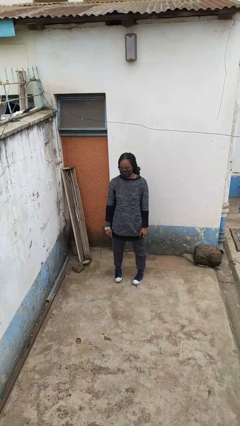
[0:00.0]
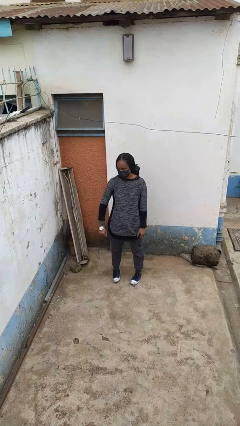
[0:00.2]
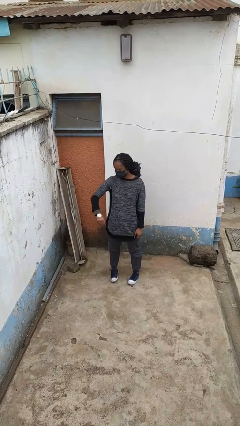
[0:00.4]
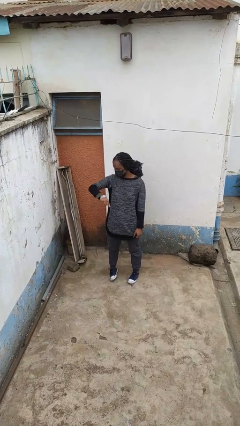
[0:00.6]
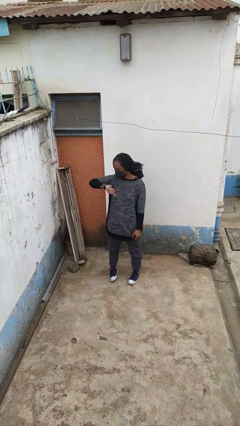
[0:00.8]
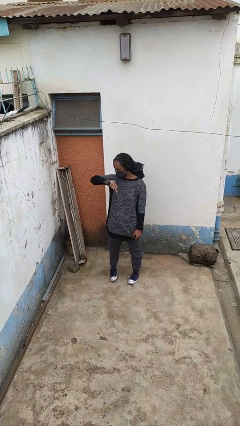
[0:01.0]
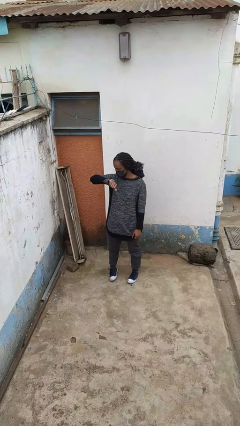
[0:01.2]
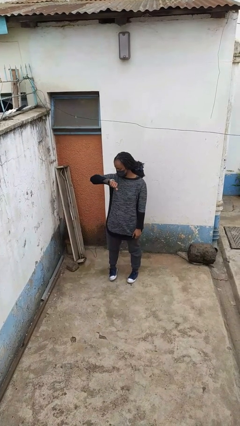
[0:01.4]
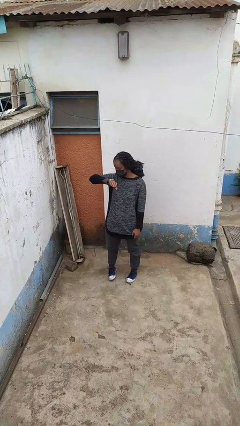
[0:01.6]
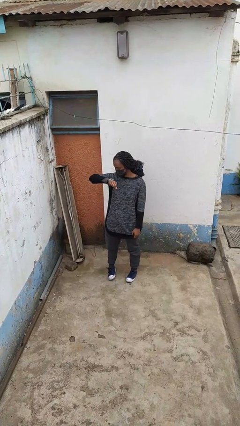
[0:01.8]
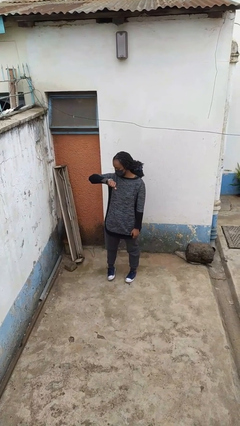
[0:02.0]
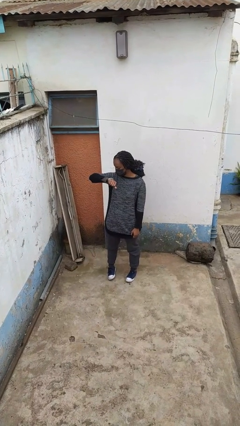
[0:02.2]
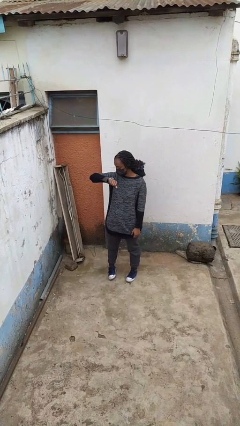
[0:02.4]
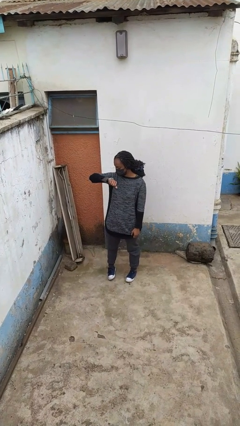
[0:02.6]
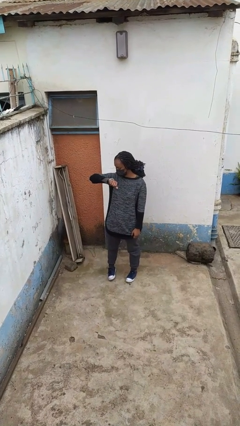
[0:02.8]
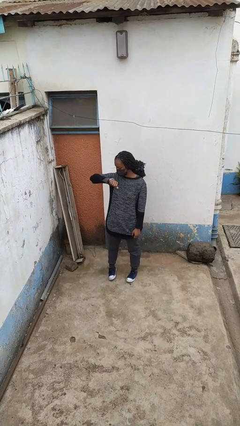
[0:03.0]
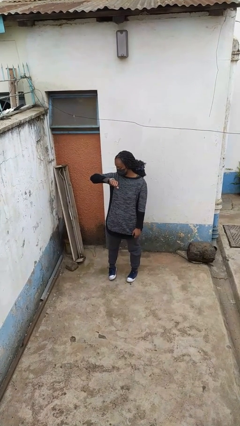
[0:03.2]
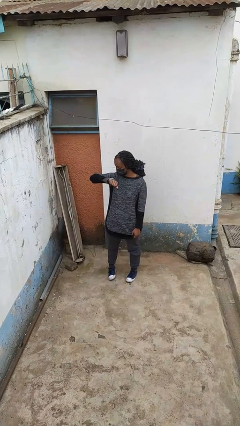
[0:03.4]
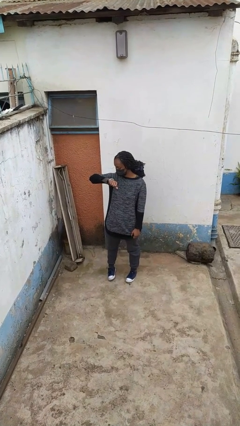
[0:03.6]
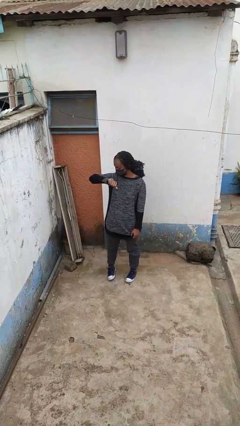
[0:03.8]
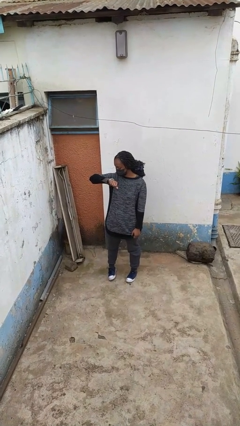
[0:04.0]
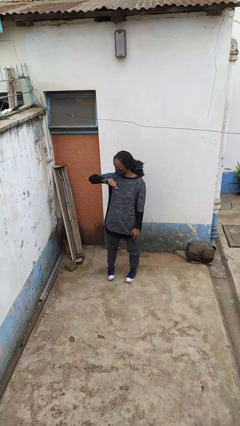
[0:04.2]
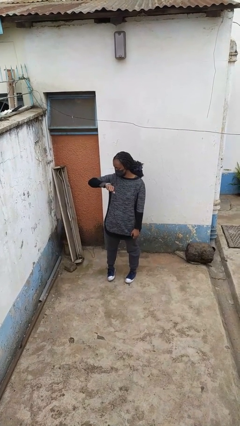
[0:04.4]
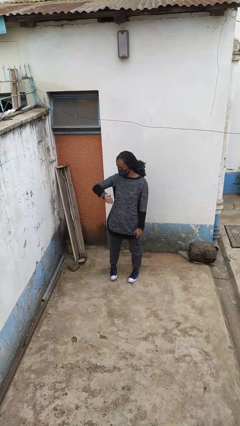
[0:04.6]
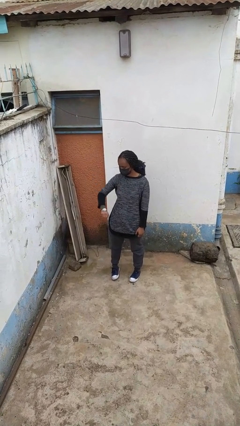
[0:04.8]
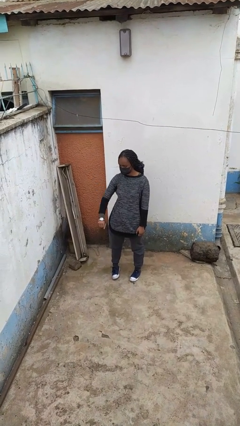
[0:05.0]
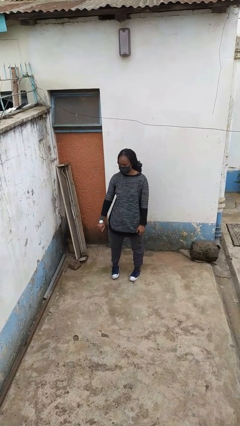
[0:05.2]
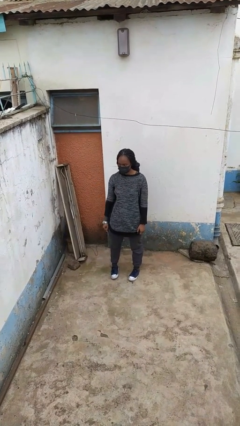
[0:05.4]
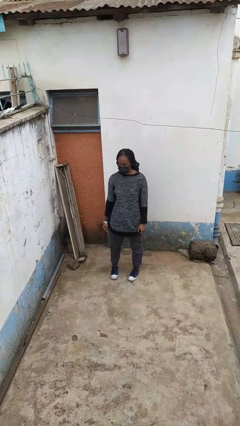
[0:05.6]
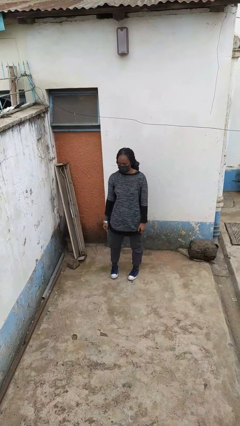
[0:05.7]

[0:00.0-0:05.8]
person looks at wristwatch

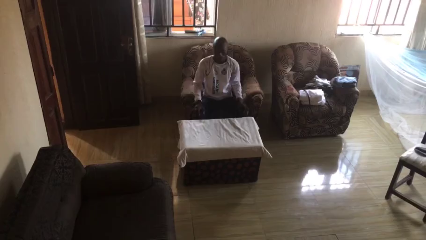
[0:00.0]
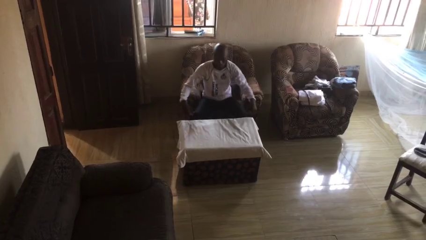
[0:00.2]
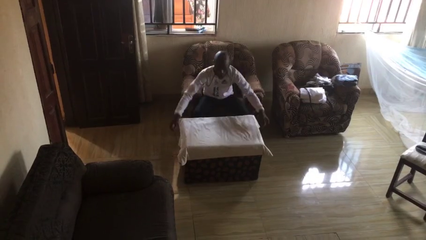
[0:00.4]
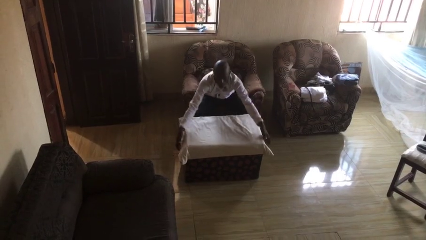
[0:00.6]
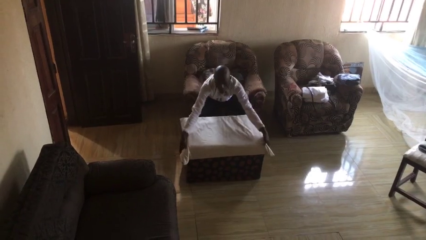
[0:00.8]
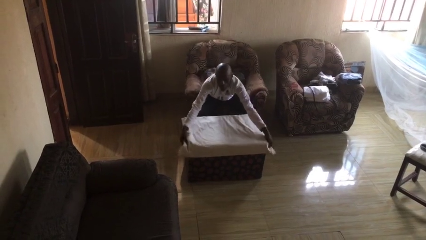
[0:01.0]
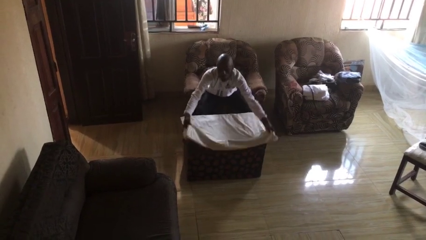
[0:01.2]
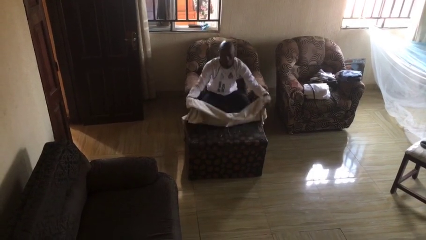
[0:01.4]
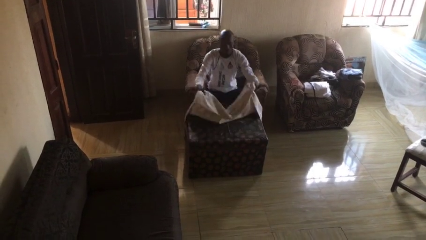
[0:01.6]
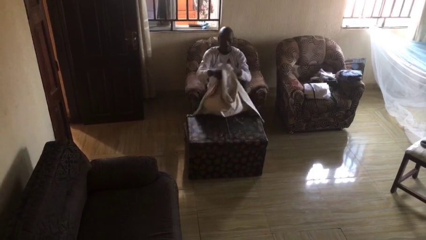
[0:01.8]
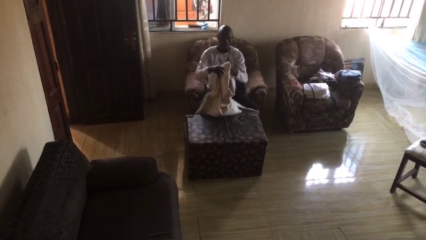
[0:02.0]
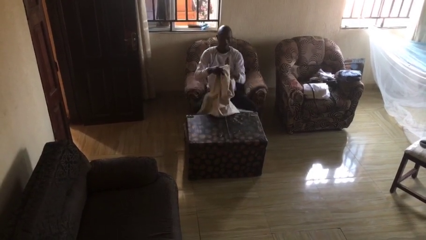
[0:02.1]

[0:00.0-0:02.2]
person folds tablecloth

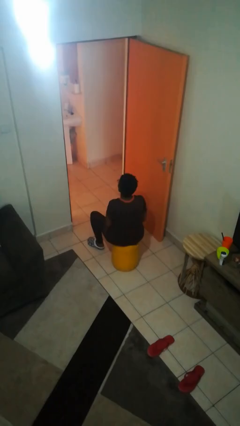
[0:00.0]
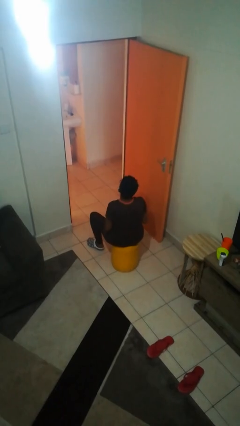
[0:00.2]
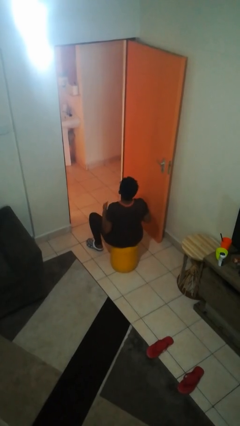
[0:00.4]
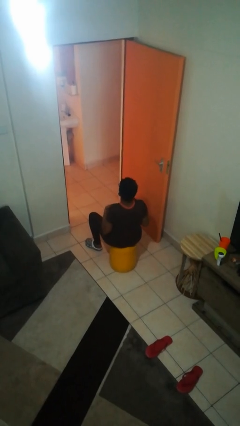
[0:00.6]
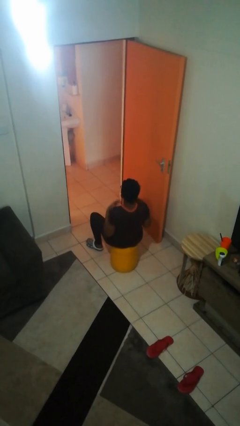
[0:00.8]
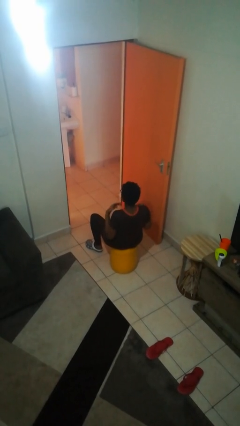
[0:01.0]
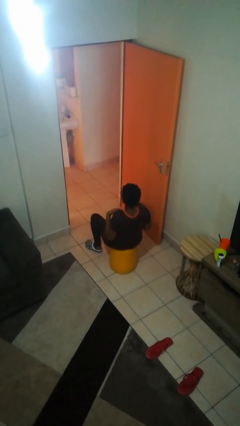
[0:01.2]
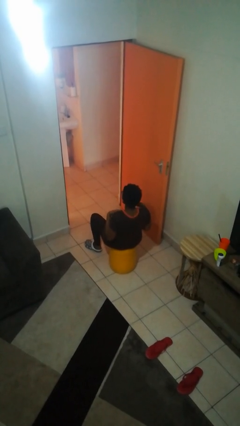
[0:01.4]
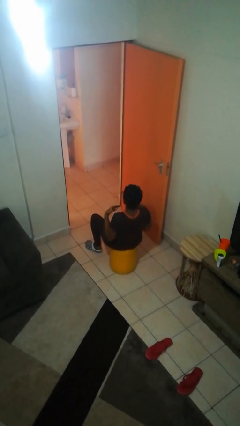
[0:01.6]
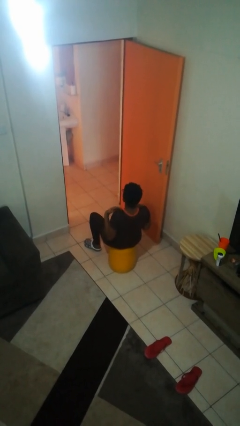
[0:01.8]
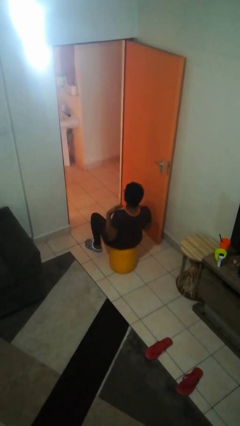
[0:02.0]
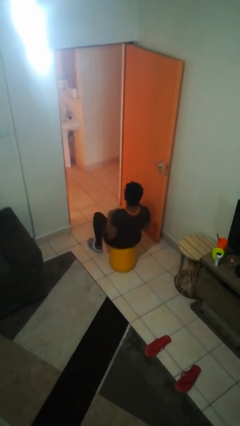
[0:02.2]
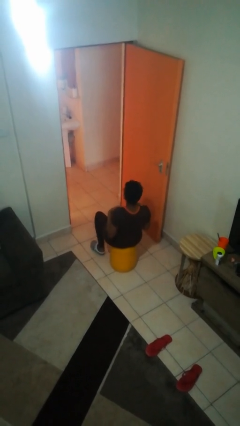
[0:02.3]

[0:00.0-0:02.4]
person drums on chest

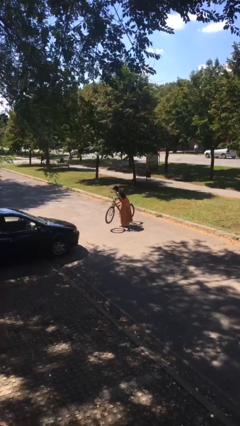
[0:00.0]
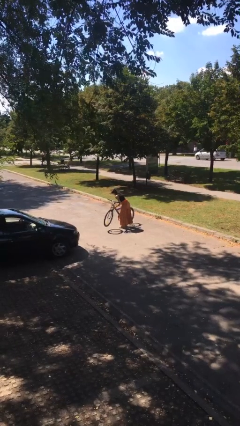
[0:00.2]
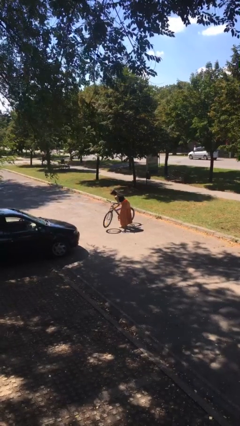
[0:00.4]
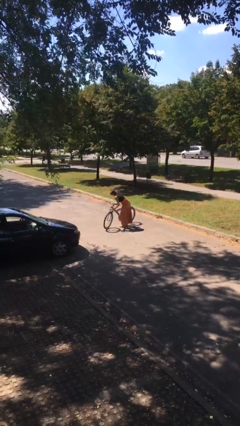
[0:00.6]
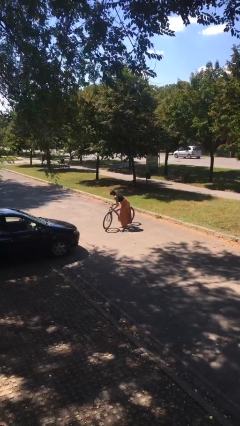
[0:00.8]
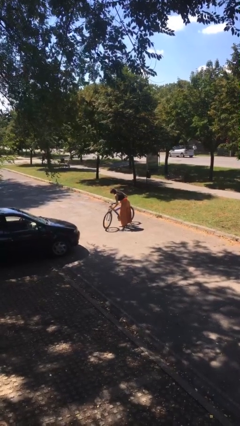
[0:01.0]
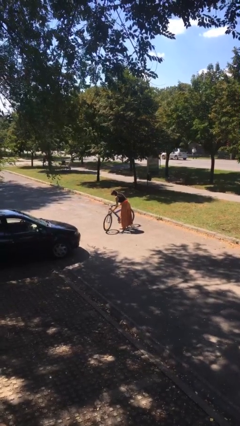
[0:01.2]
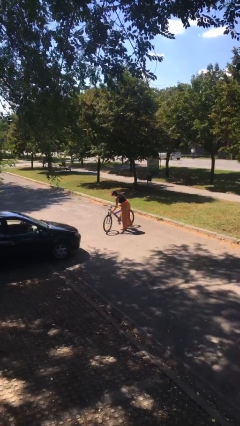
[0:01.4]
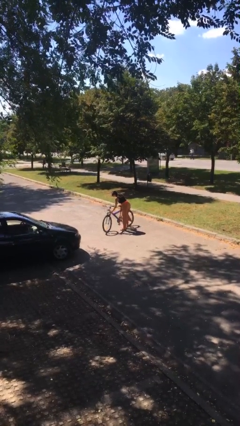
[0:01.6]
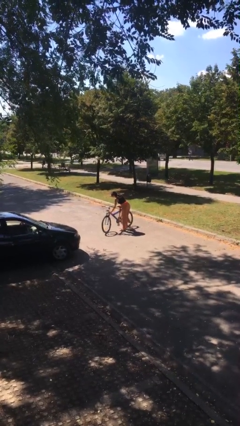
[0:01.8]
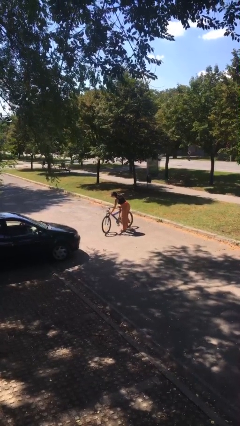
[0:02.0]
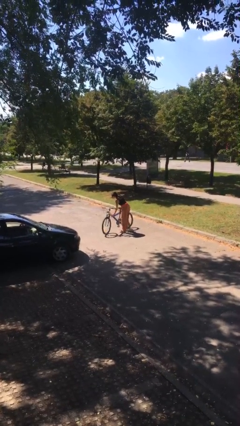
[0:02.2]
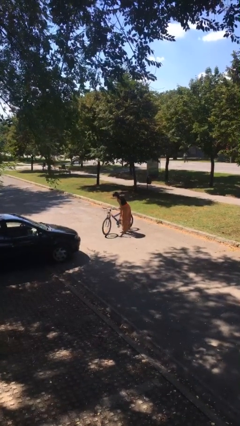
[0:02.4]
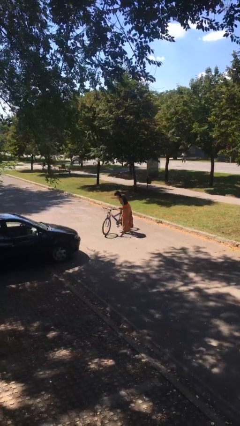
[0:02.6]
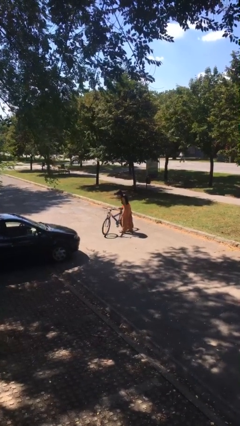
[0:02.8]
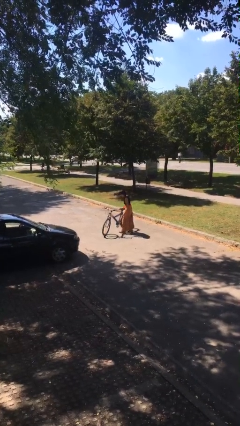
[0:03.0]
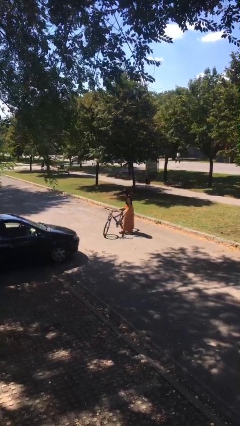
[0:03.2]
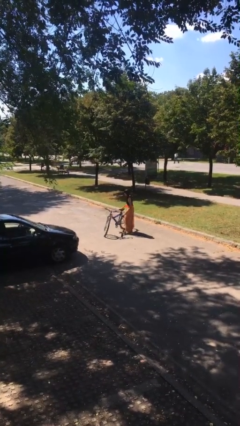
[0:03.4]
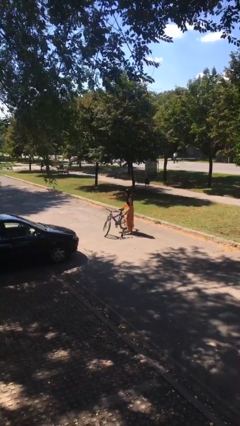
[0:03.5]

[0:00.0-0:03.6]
person puts down object on floor

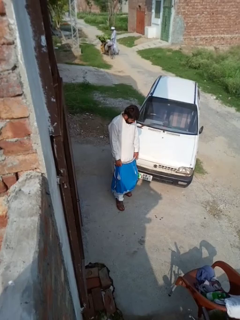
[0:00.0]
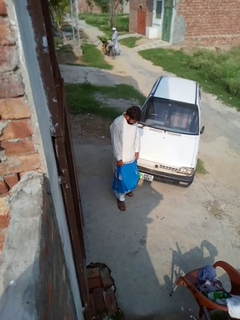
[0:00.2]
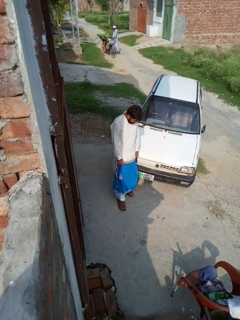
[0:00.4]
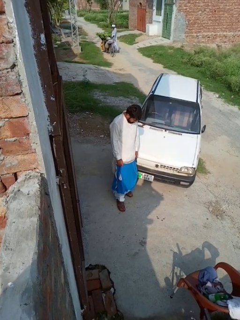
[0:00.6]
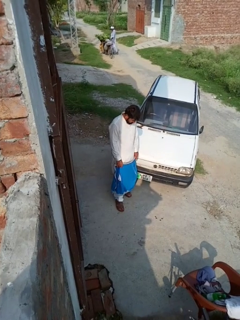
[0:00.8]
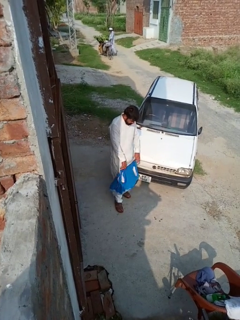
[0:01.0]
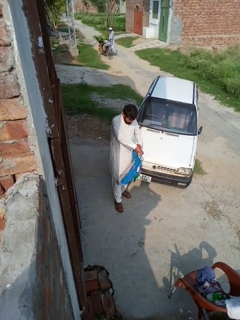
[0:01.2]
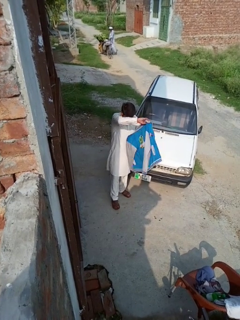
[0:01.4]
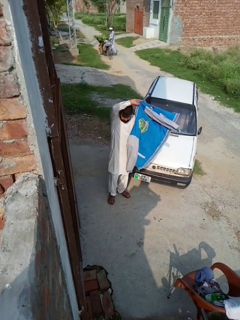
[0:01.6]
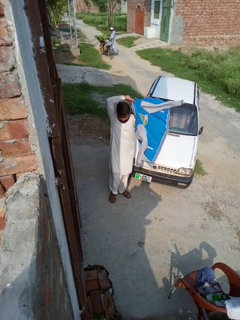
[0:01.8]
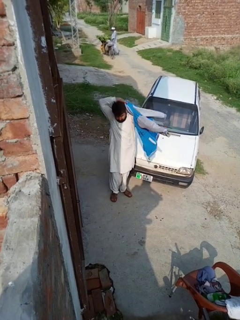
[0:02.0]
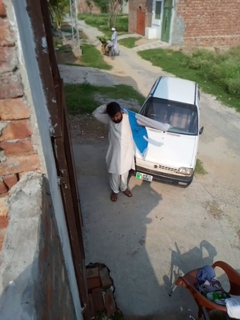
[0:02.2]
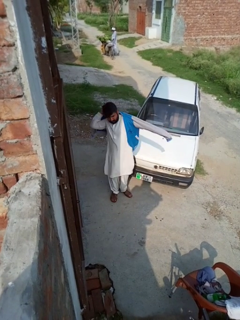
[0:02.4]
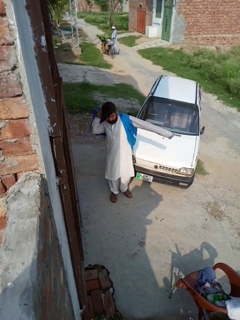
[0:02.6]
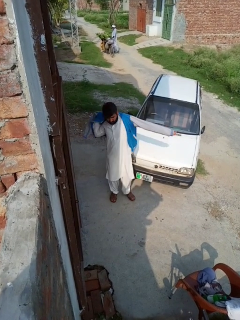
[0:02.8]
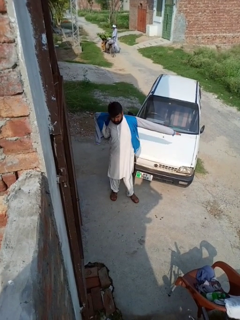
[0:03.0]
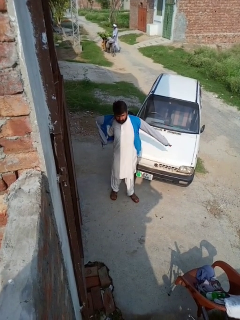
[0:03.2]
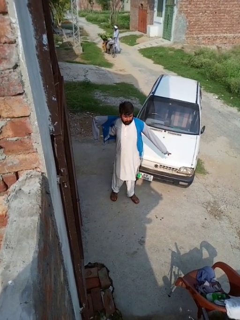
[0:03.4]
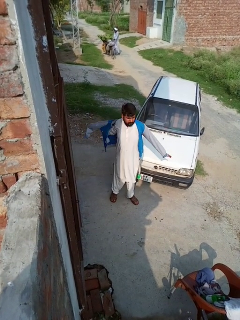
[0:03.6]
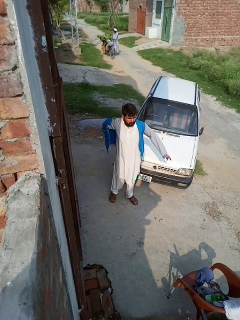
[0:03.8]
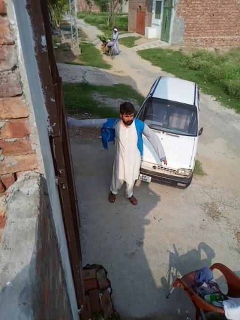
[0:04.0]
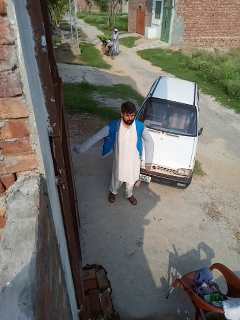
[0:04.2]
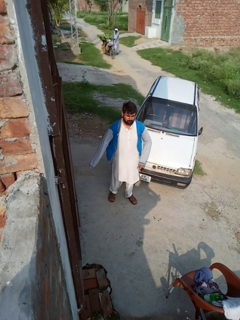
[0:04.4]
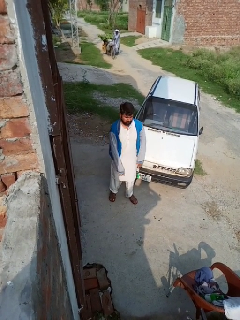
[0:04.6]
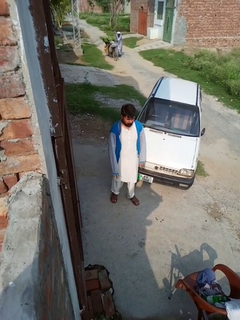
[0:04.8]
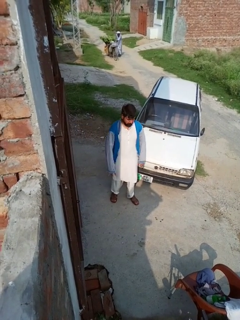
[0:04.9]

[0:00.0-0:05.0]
person puts on jacket
